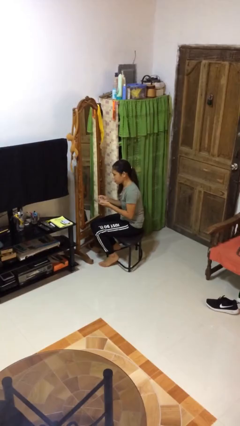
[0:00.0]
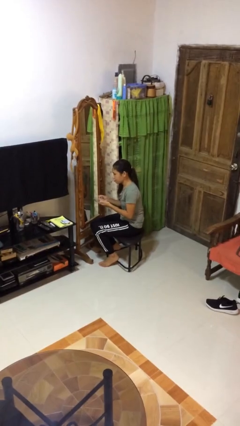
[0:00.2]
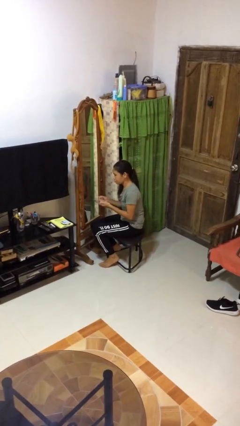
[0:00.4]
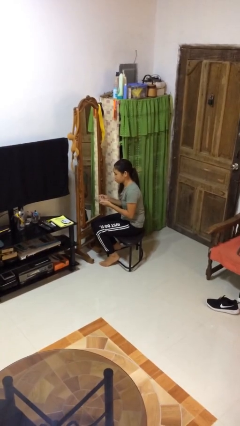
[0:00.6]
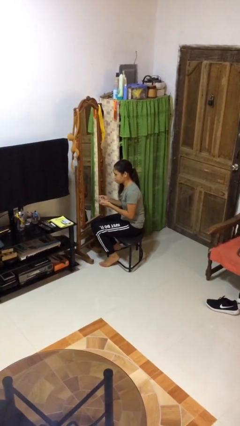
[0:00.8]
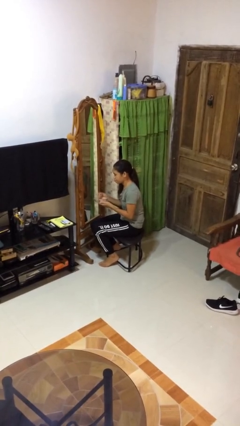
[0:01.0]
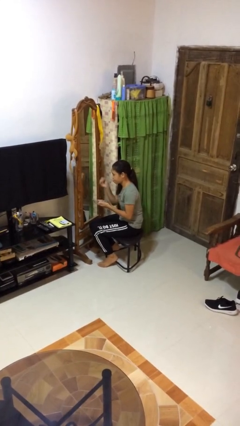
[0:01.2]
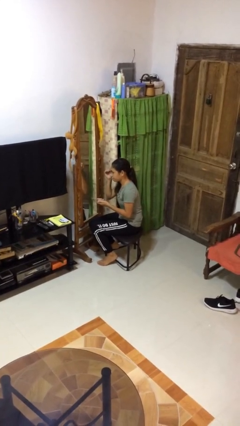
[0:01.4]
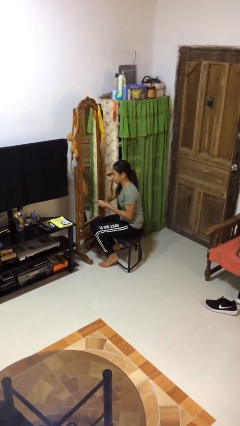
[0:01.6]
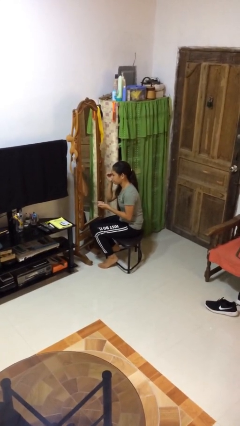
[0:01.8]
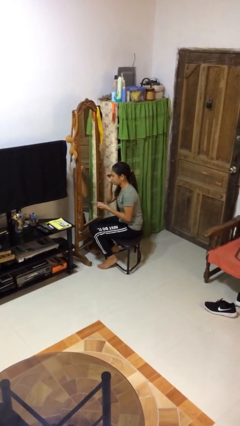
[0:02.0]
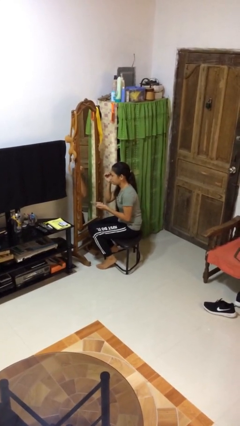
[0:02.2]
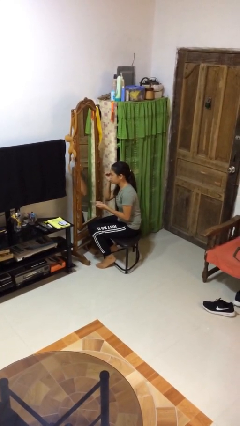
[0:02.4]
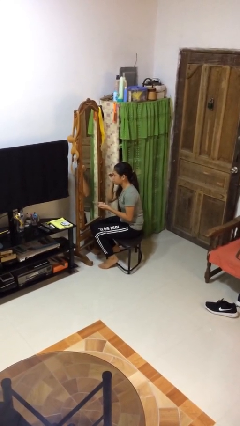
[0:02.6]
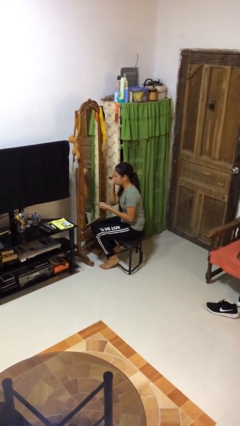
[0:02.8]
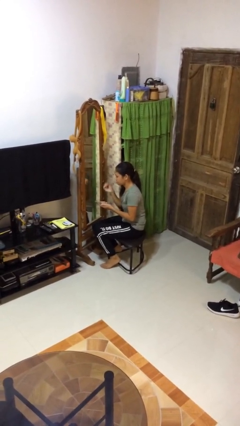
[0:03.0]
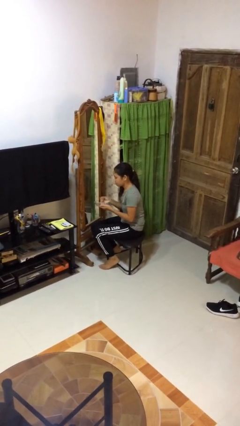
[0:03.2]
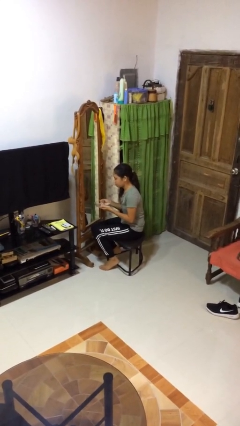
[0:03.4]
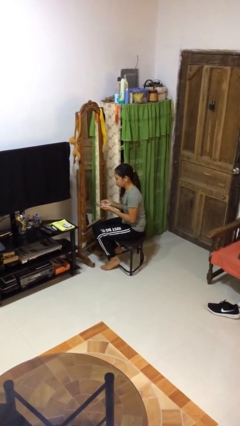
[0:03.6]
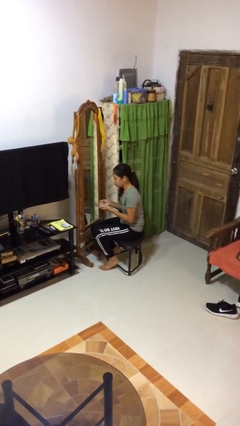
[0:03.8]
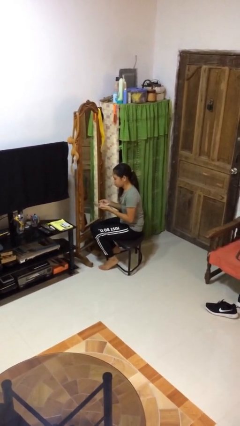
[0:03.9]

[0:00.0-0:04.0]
person applies eye makeup

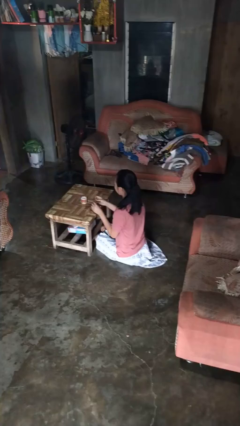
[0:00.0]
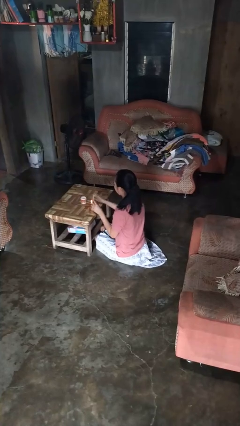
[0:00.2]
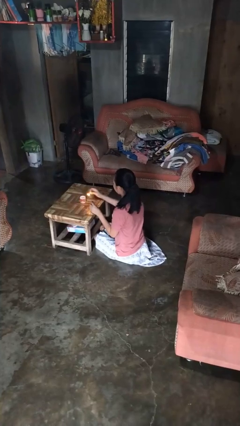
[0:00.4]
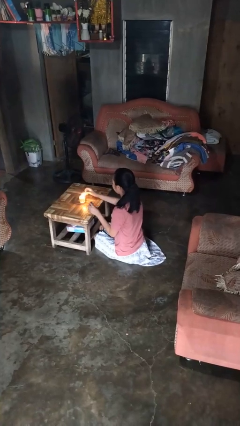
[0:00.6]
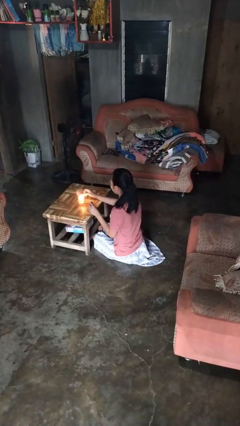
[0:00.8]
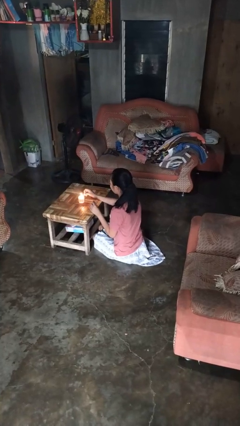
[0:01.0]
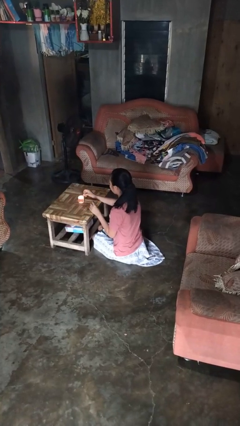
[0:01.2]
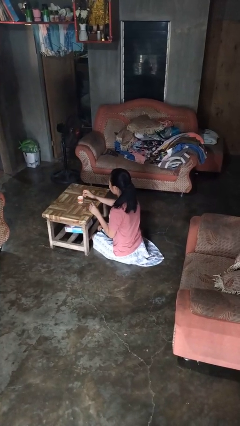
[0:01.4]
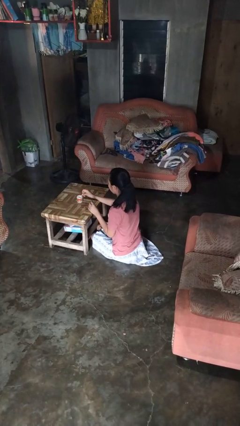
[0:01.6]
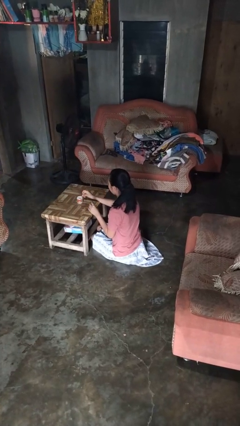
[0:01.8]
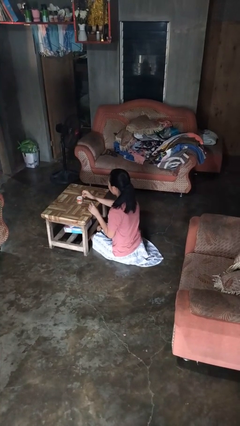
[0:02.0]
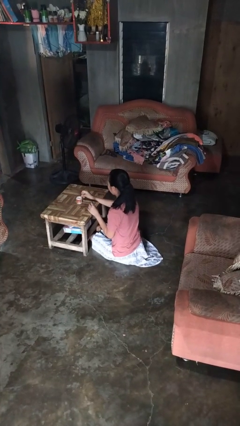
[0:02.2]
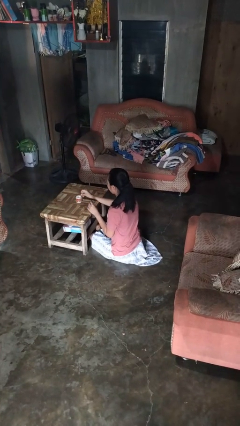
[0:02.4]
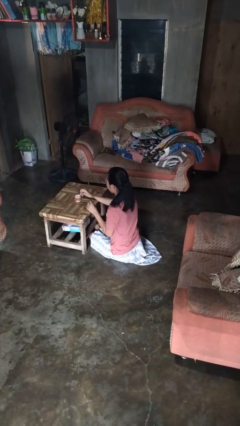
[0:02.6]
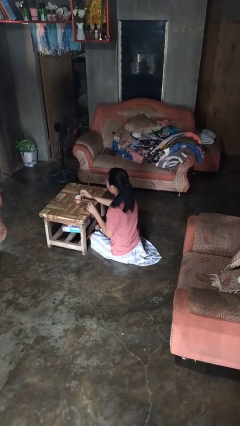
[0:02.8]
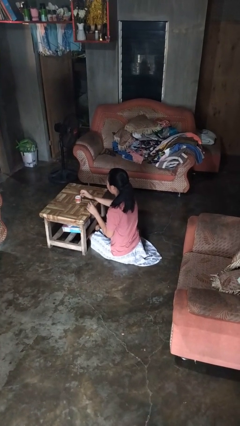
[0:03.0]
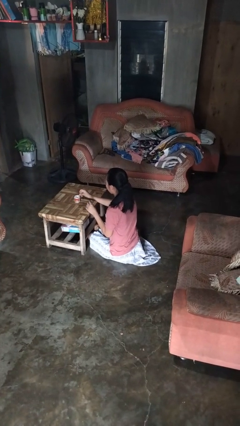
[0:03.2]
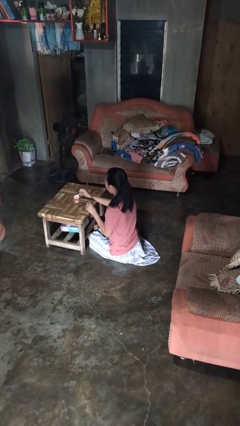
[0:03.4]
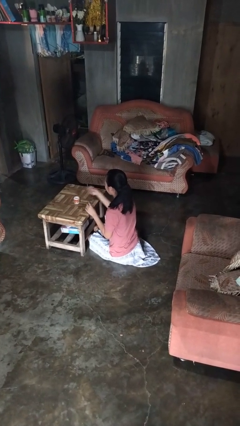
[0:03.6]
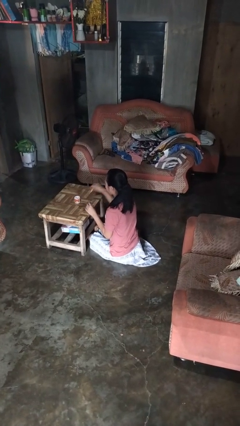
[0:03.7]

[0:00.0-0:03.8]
person lights candle

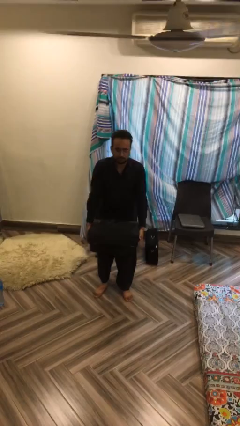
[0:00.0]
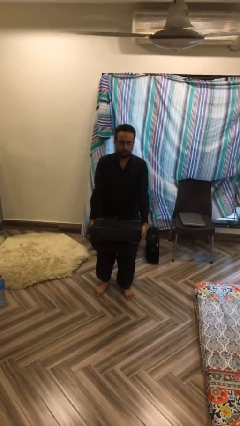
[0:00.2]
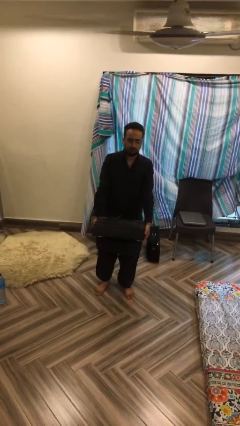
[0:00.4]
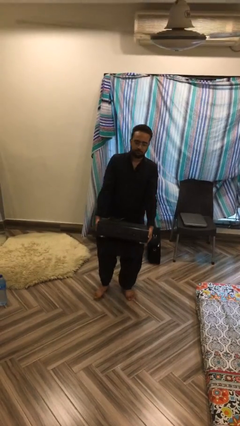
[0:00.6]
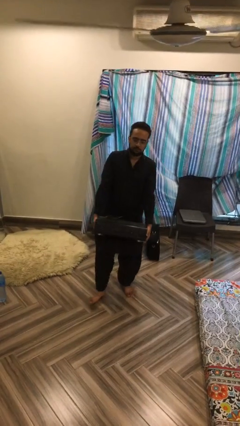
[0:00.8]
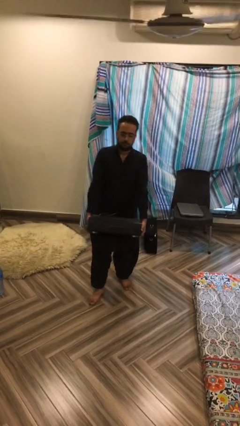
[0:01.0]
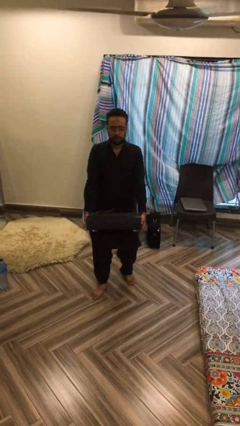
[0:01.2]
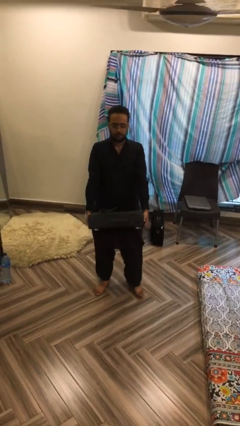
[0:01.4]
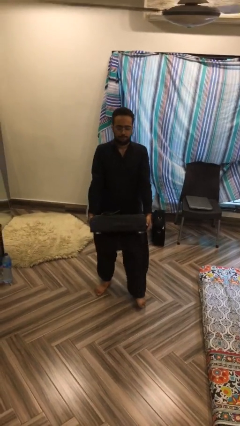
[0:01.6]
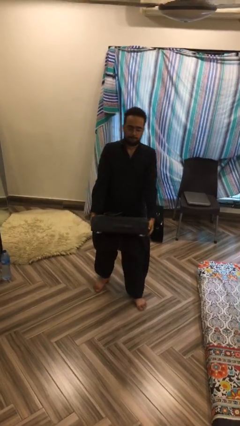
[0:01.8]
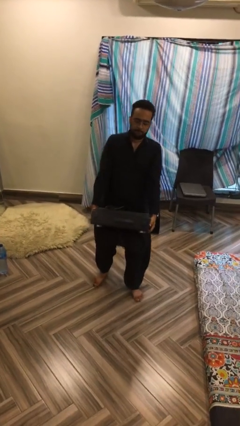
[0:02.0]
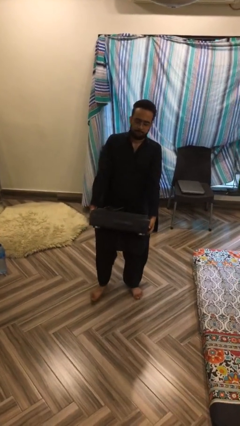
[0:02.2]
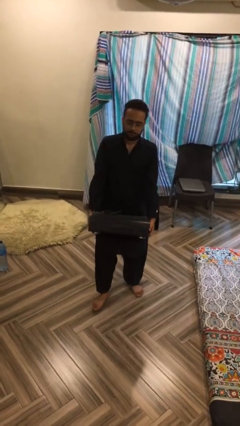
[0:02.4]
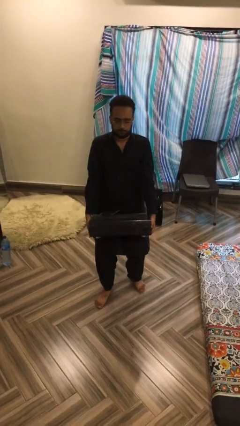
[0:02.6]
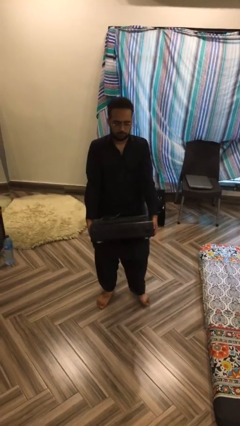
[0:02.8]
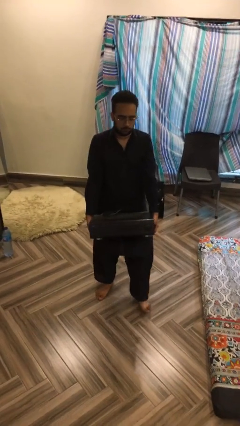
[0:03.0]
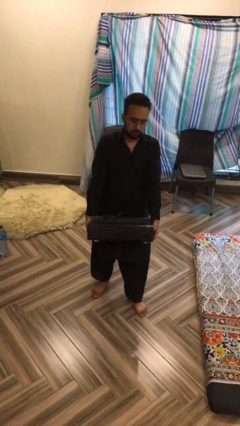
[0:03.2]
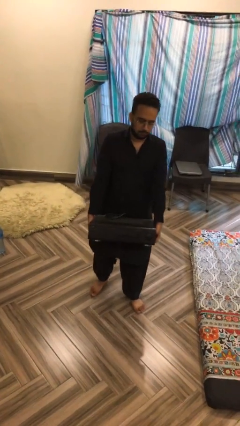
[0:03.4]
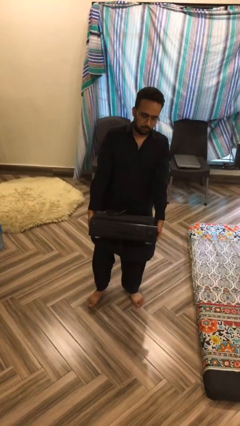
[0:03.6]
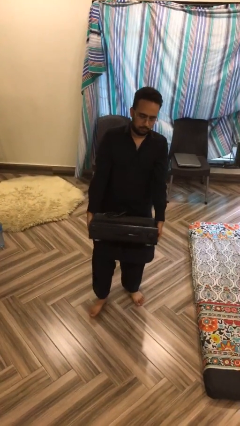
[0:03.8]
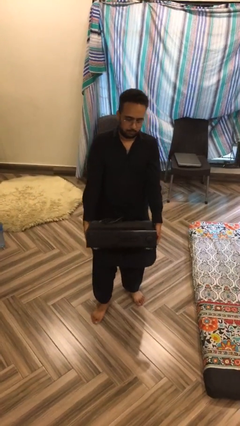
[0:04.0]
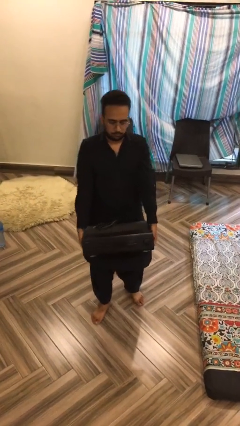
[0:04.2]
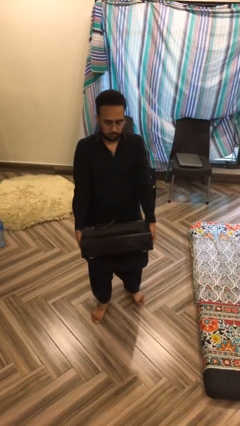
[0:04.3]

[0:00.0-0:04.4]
person carries heavy object

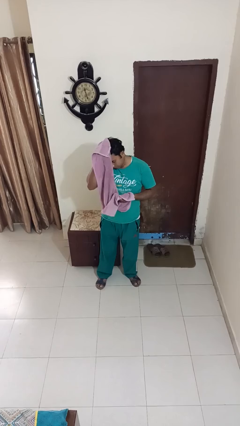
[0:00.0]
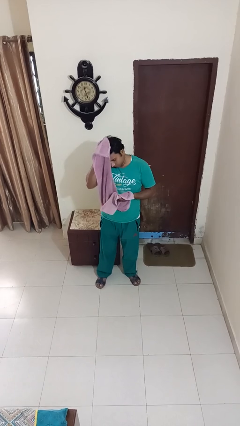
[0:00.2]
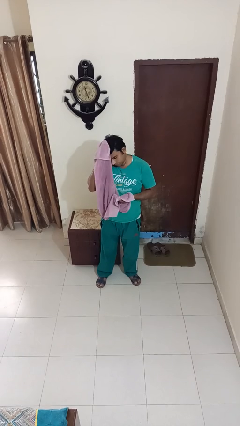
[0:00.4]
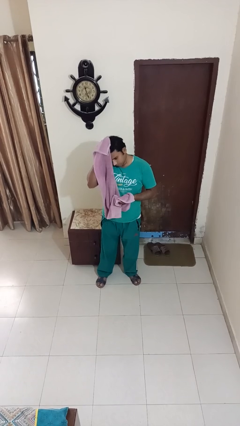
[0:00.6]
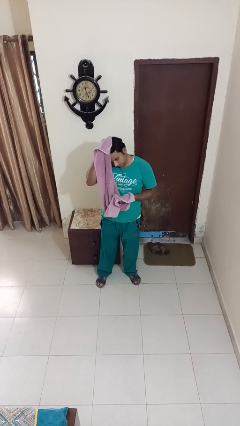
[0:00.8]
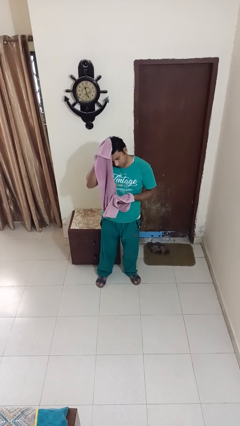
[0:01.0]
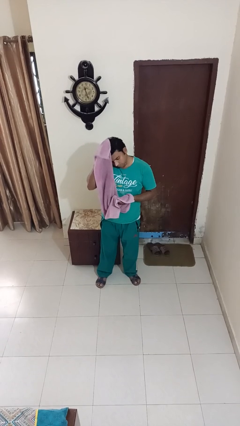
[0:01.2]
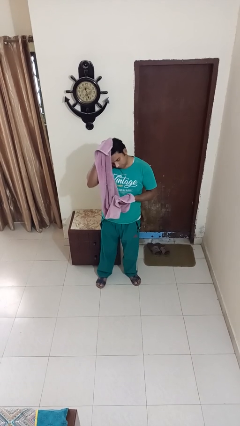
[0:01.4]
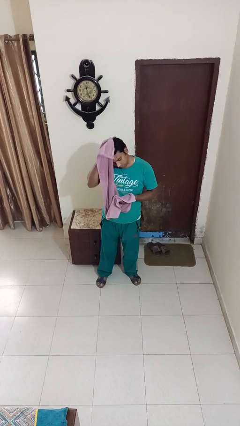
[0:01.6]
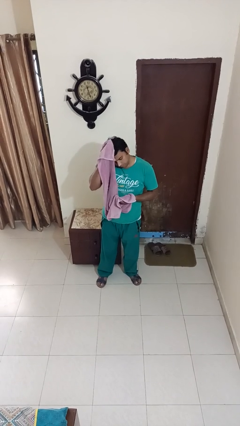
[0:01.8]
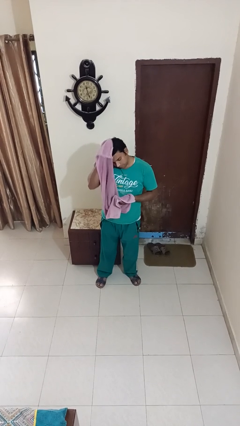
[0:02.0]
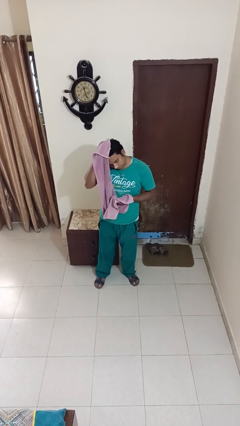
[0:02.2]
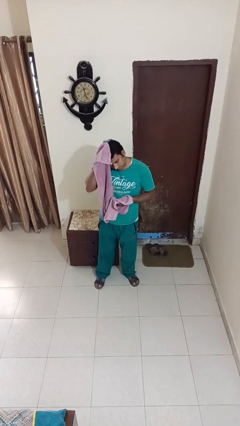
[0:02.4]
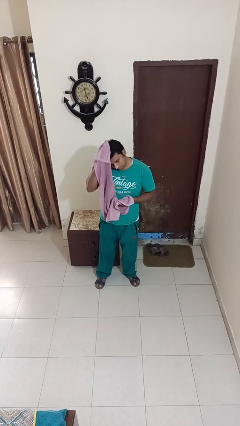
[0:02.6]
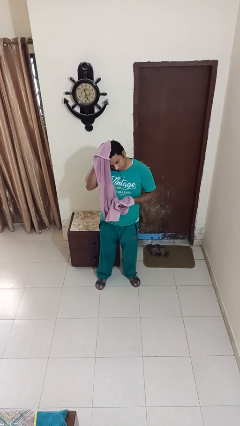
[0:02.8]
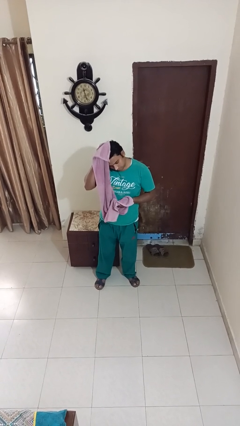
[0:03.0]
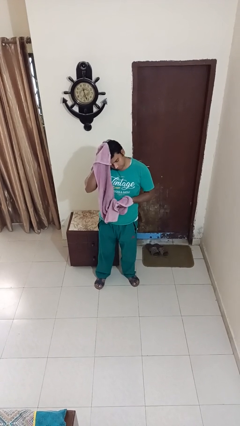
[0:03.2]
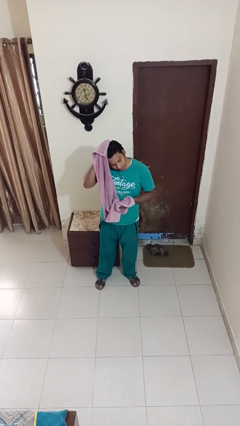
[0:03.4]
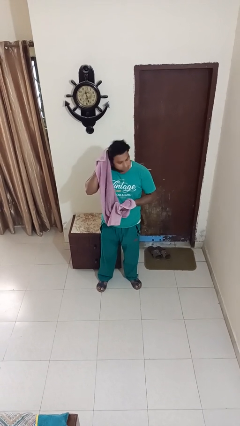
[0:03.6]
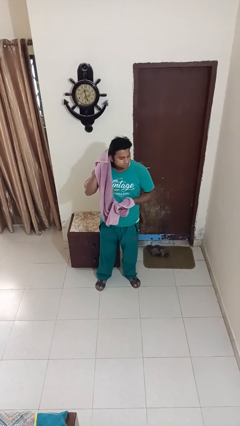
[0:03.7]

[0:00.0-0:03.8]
person dries hair with towel

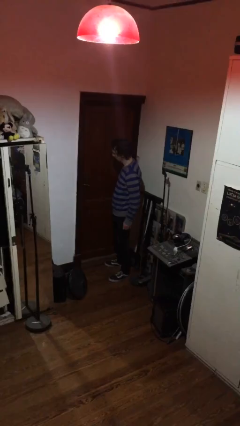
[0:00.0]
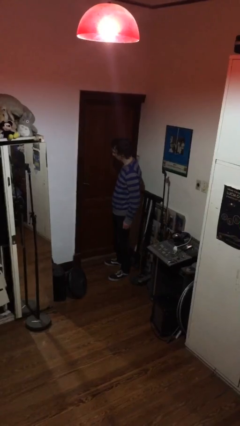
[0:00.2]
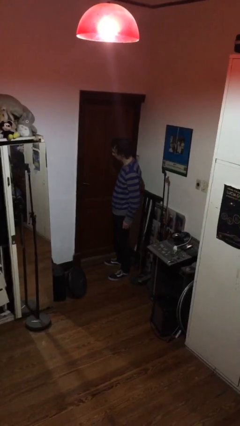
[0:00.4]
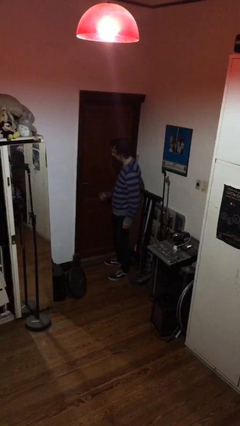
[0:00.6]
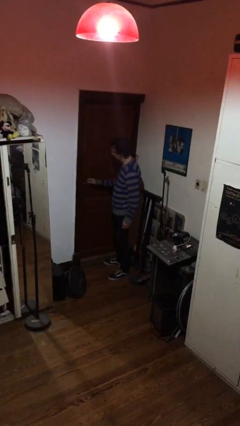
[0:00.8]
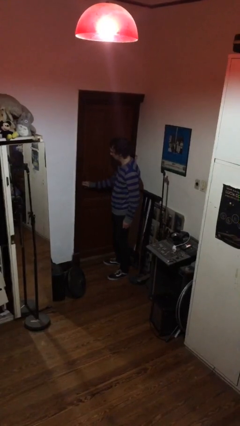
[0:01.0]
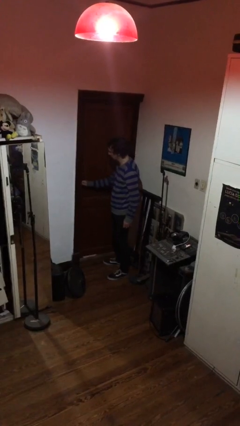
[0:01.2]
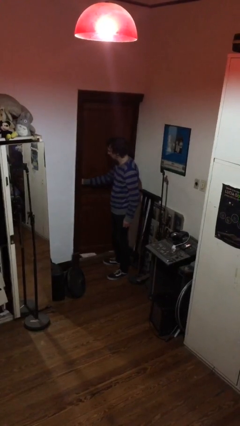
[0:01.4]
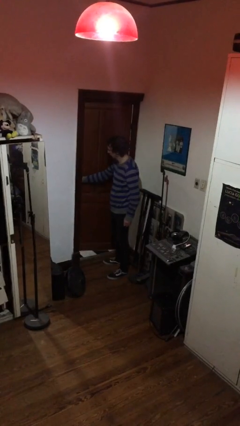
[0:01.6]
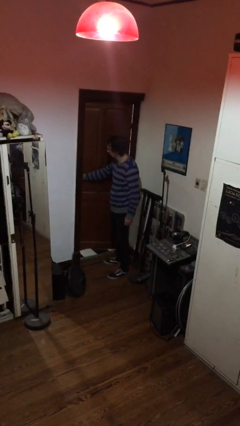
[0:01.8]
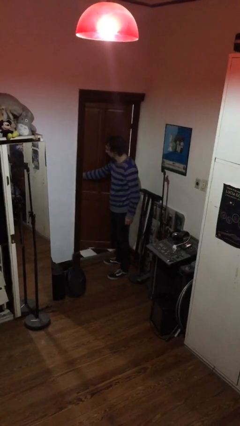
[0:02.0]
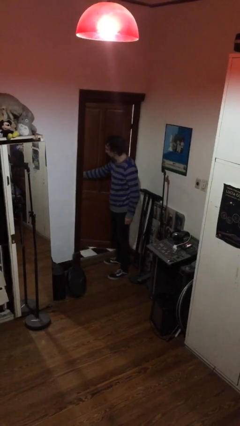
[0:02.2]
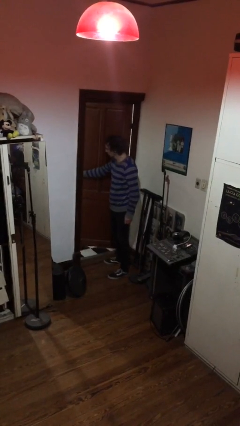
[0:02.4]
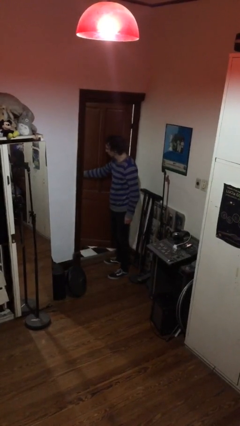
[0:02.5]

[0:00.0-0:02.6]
person opens facility door
